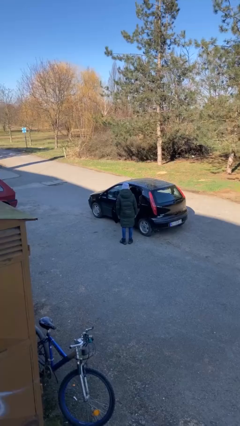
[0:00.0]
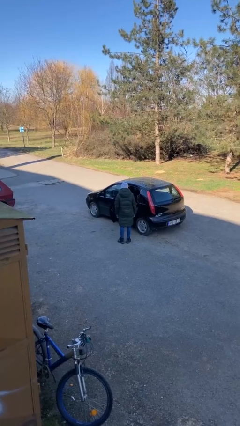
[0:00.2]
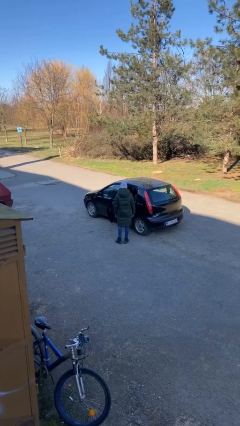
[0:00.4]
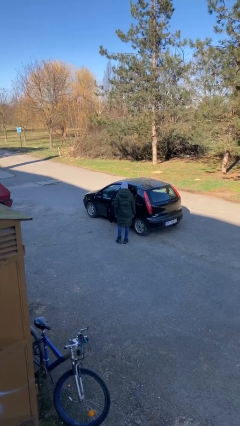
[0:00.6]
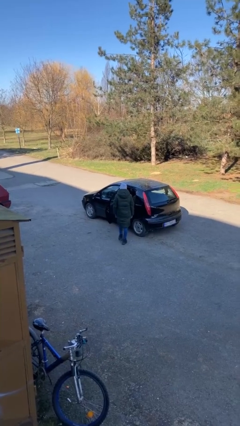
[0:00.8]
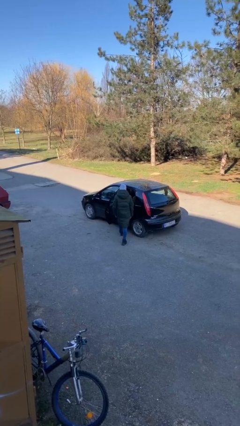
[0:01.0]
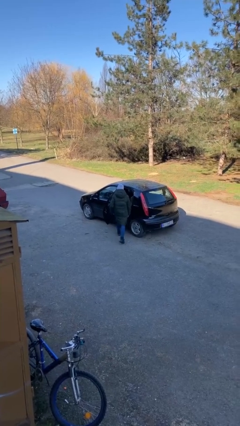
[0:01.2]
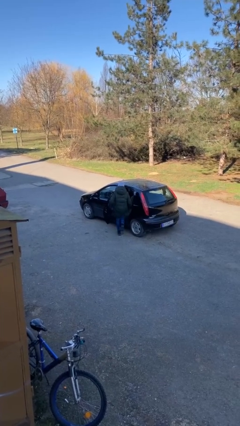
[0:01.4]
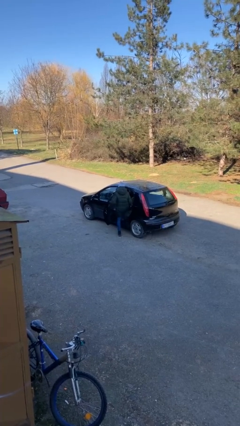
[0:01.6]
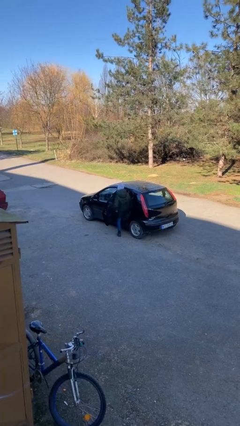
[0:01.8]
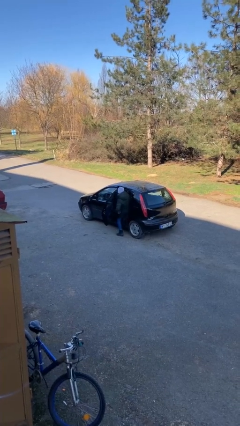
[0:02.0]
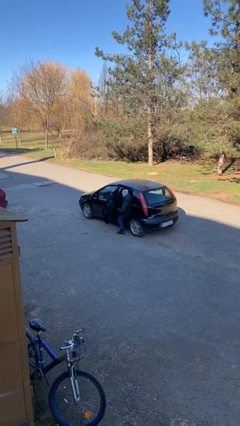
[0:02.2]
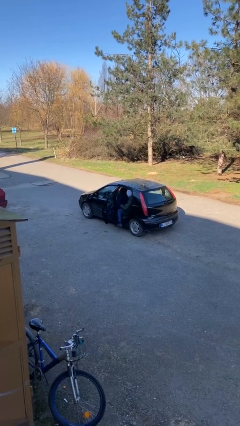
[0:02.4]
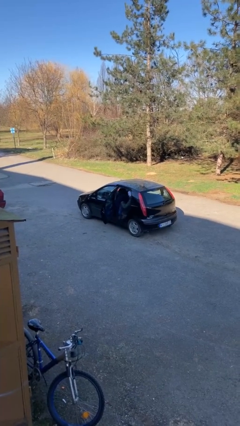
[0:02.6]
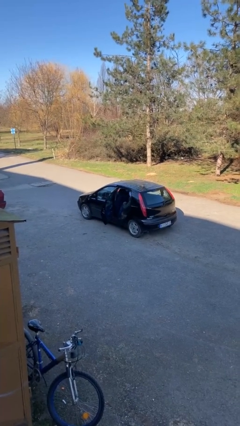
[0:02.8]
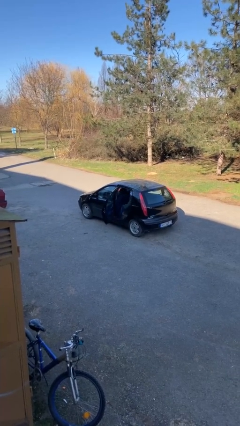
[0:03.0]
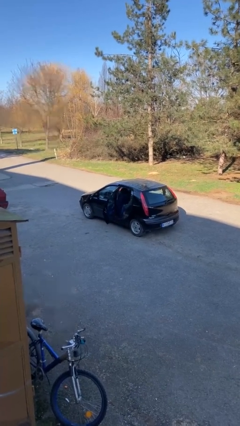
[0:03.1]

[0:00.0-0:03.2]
person enters car

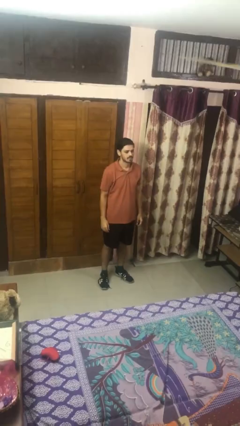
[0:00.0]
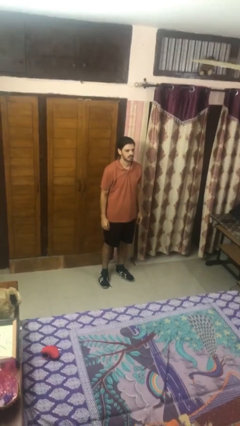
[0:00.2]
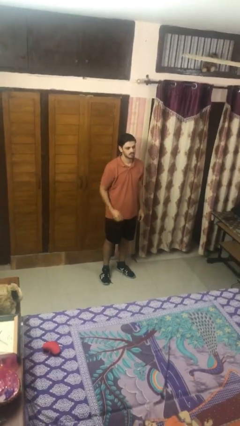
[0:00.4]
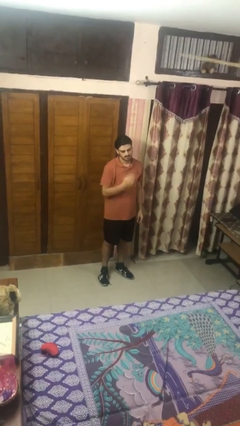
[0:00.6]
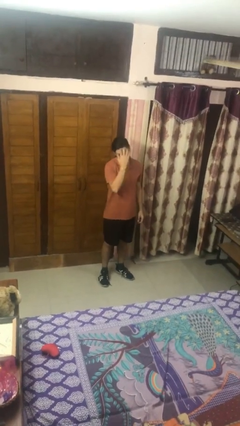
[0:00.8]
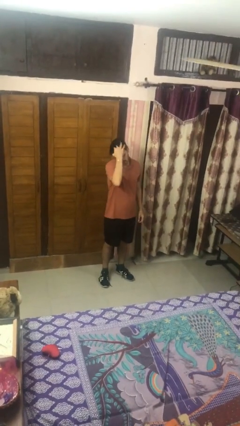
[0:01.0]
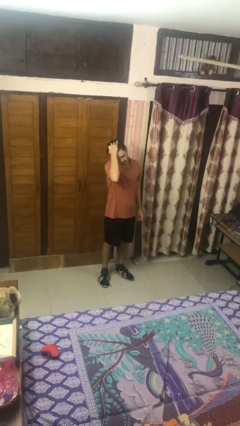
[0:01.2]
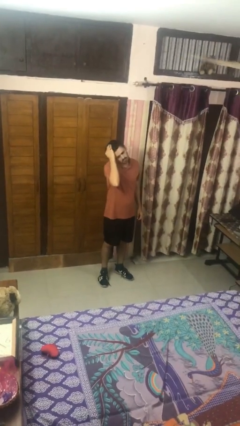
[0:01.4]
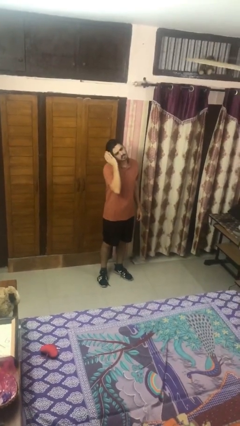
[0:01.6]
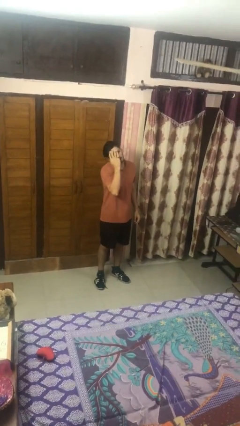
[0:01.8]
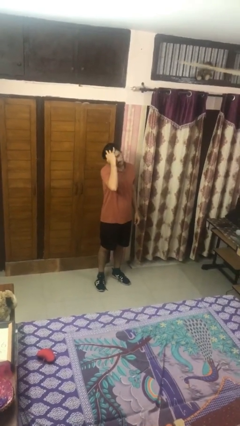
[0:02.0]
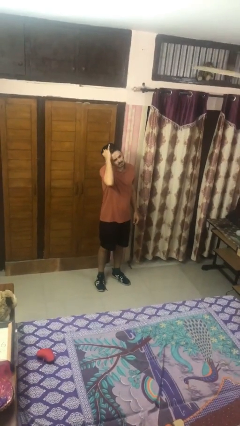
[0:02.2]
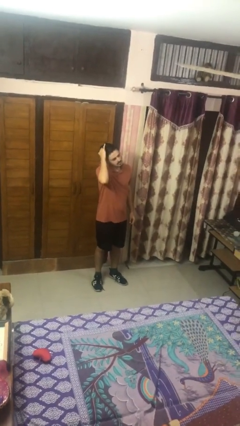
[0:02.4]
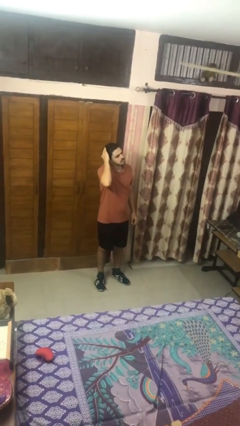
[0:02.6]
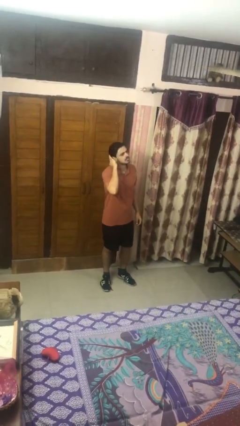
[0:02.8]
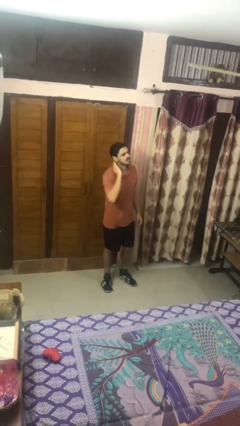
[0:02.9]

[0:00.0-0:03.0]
person strokes hair

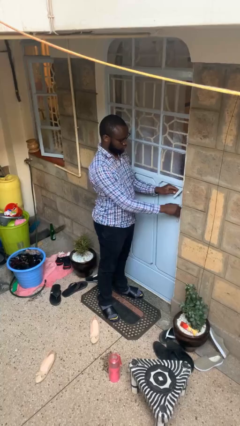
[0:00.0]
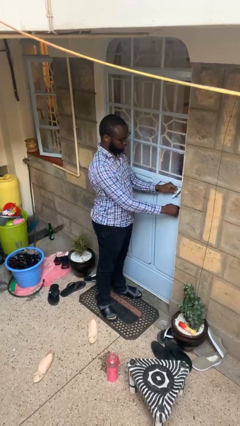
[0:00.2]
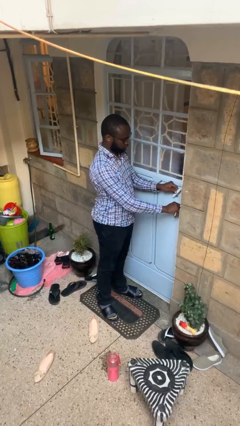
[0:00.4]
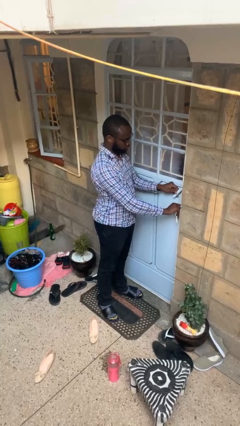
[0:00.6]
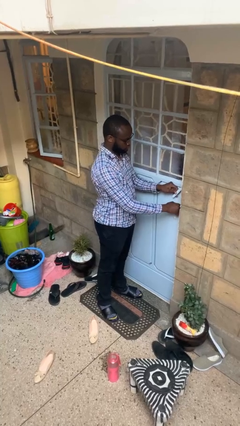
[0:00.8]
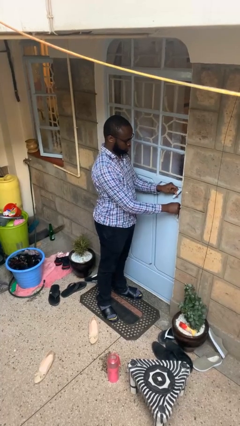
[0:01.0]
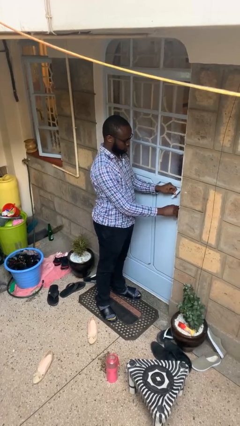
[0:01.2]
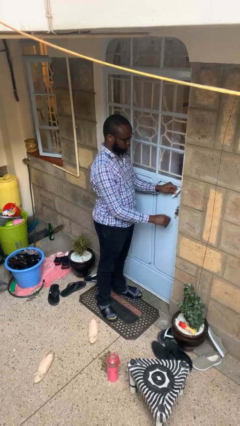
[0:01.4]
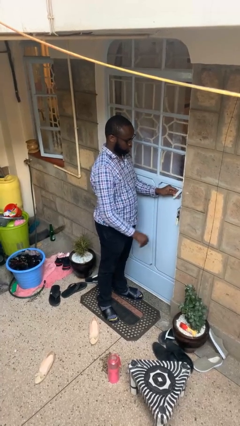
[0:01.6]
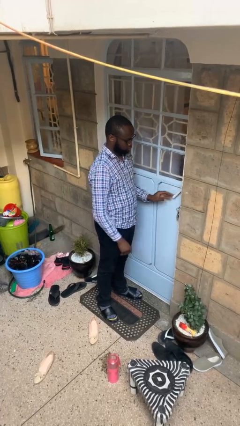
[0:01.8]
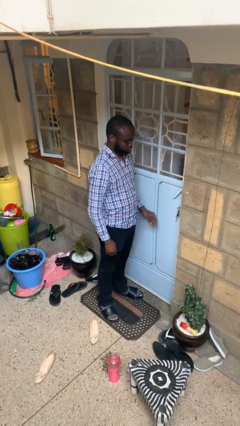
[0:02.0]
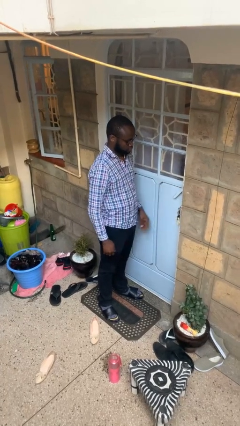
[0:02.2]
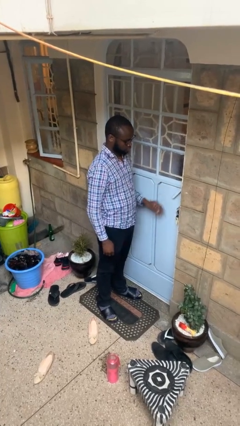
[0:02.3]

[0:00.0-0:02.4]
person unlocks door with keys

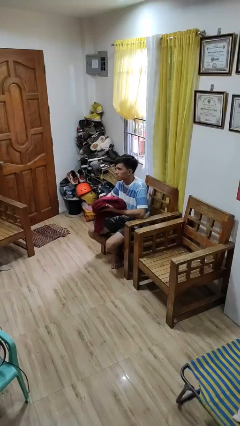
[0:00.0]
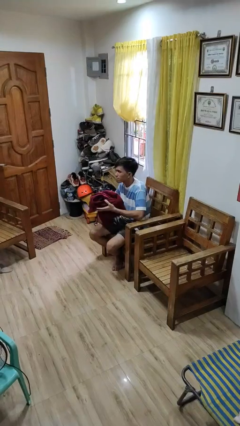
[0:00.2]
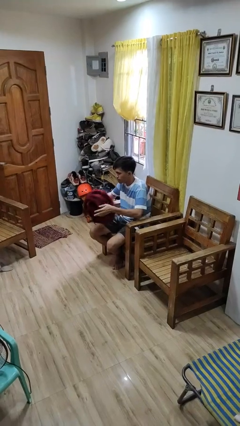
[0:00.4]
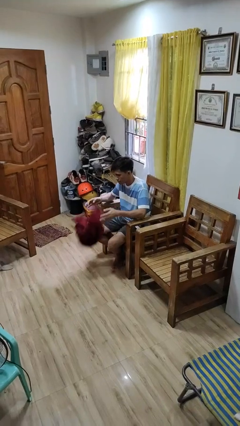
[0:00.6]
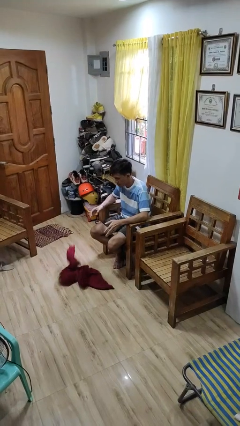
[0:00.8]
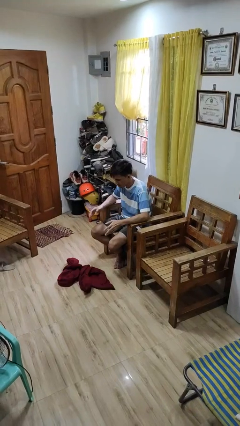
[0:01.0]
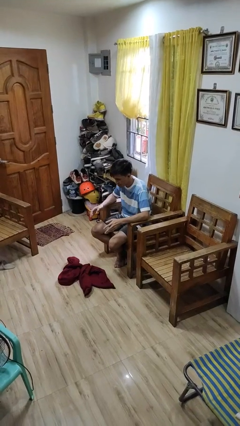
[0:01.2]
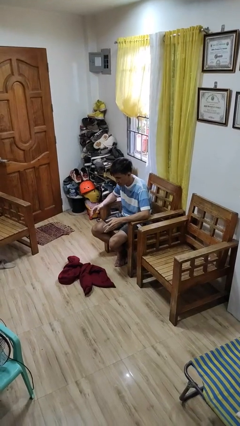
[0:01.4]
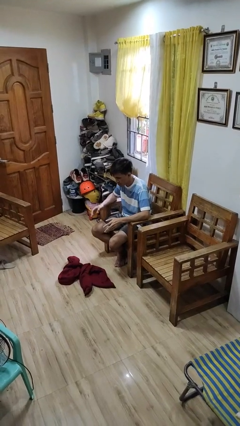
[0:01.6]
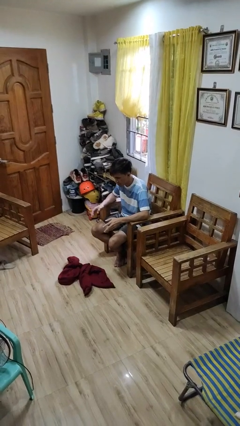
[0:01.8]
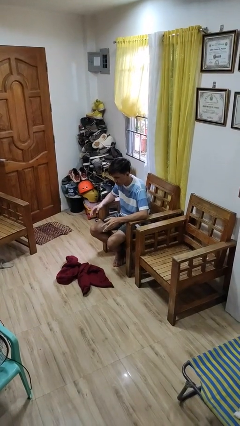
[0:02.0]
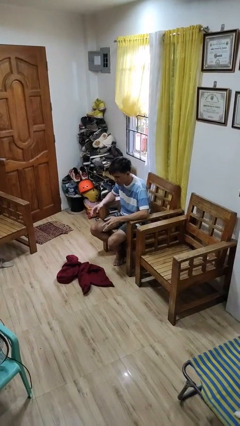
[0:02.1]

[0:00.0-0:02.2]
person drops object

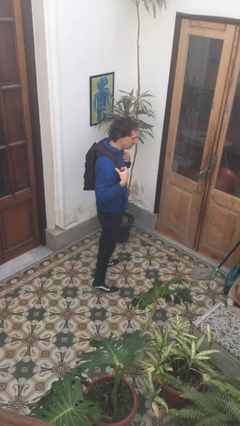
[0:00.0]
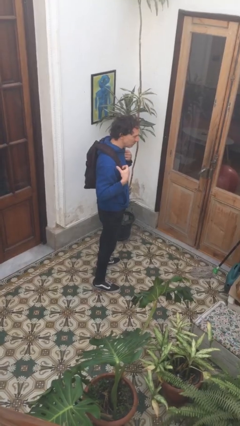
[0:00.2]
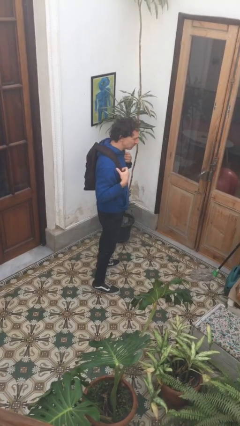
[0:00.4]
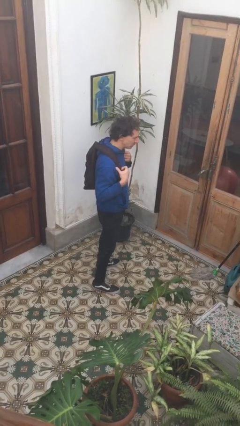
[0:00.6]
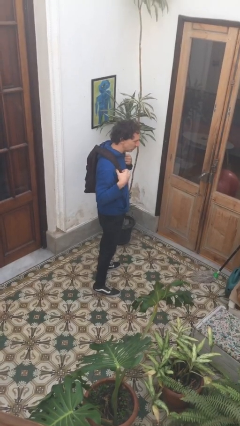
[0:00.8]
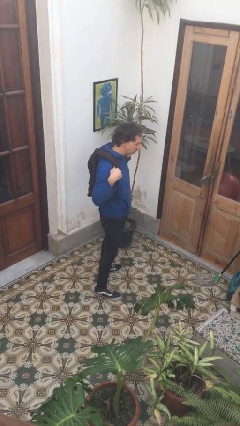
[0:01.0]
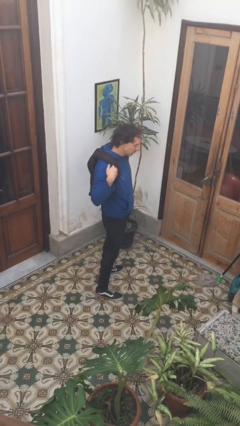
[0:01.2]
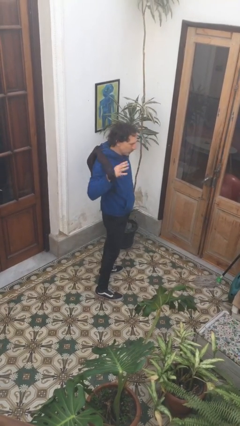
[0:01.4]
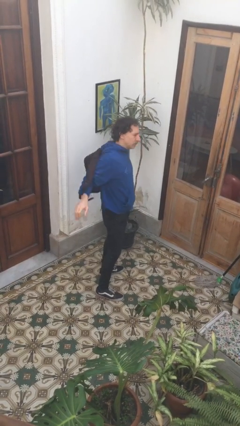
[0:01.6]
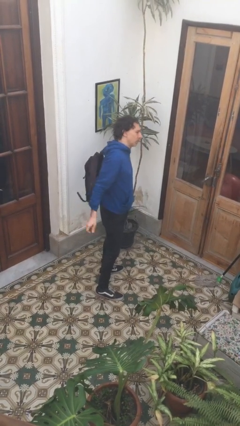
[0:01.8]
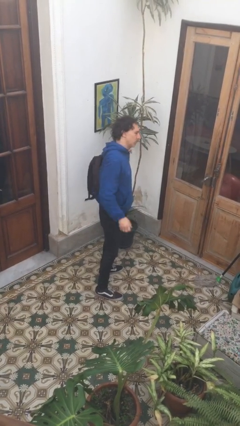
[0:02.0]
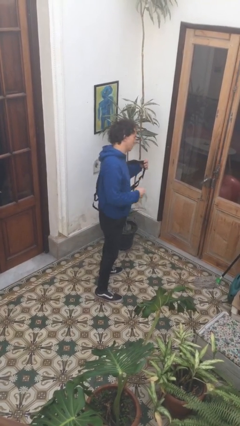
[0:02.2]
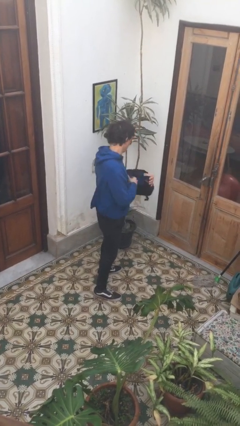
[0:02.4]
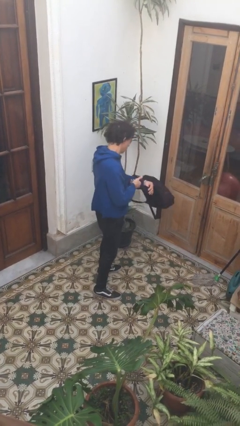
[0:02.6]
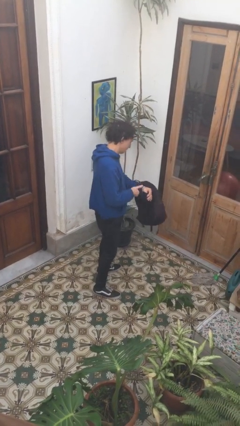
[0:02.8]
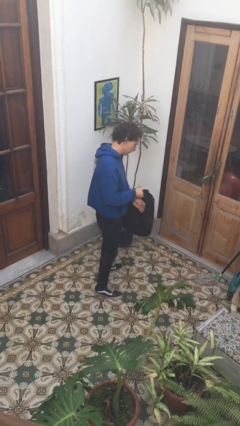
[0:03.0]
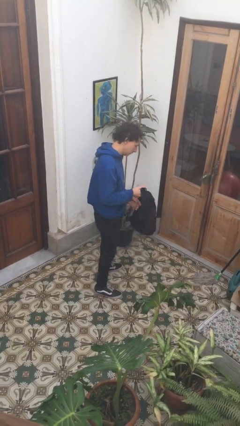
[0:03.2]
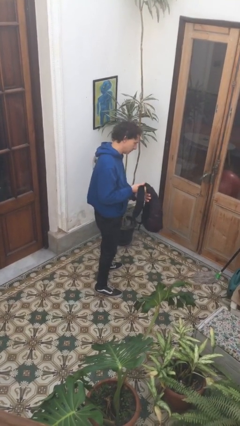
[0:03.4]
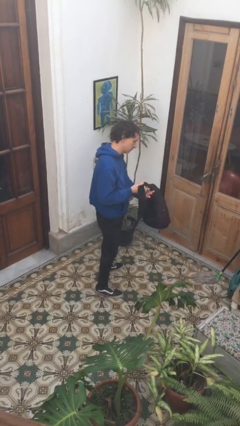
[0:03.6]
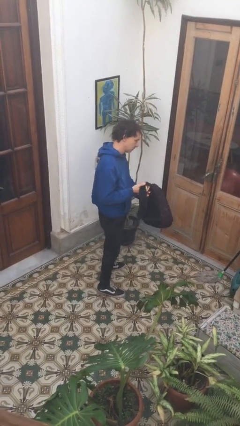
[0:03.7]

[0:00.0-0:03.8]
person takes off backpack

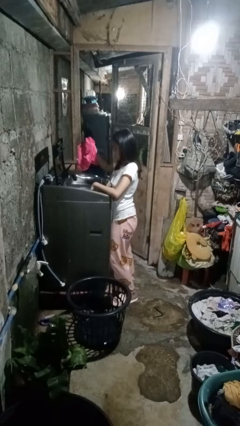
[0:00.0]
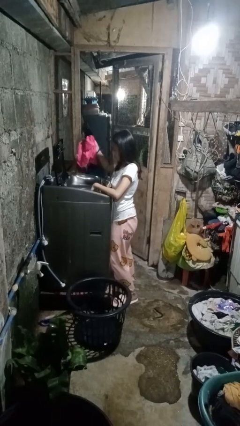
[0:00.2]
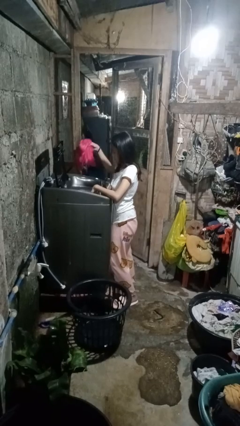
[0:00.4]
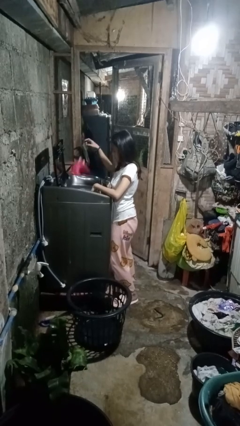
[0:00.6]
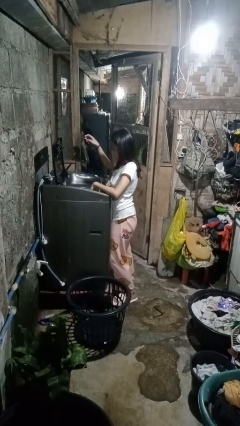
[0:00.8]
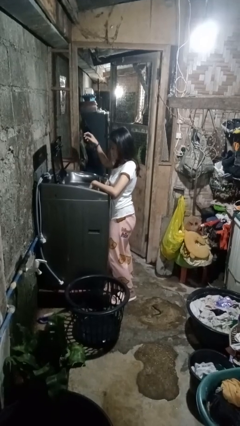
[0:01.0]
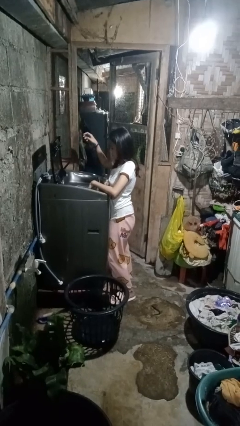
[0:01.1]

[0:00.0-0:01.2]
person loads dryer

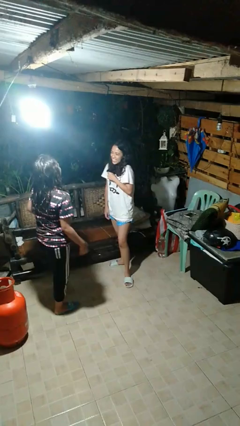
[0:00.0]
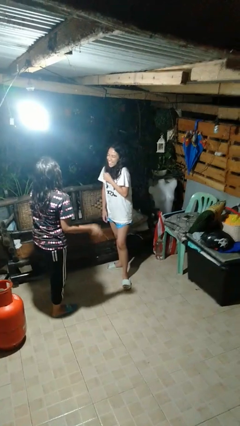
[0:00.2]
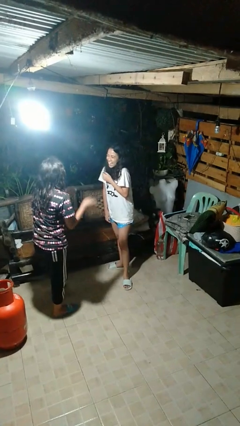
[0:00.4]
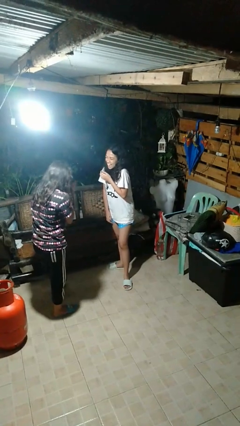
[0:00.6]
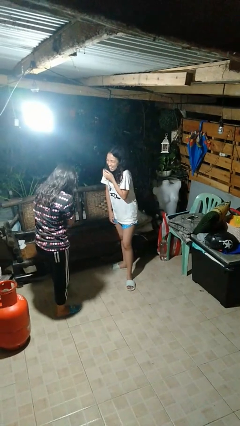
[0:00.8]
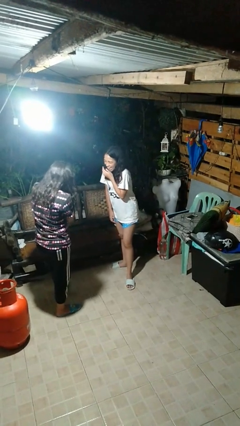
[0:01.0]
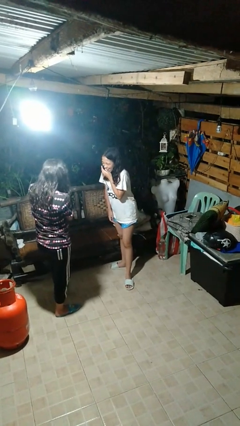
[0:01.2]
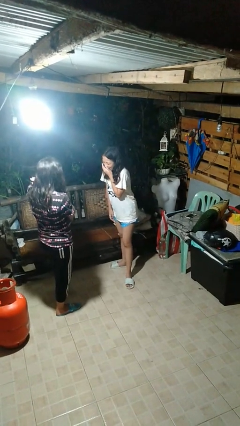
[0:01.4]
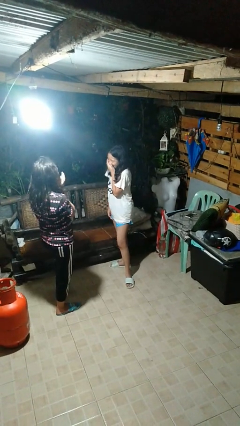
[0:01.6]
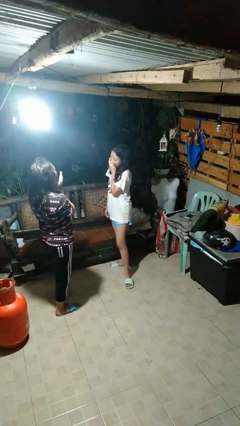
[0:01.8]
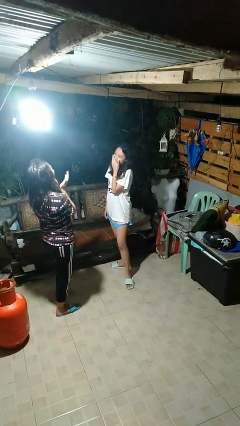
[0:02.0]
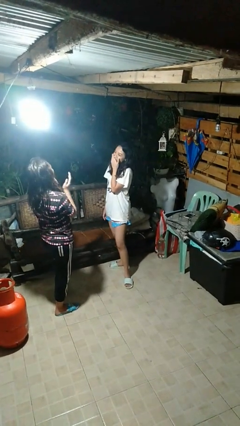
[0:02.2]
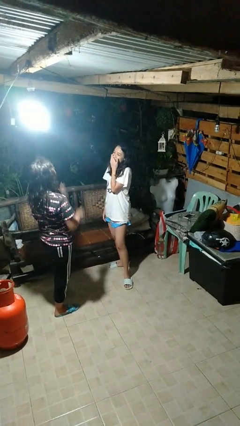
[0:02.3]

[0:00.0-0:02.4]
person laughs with person
